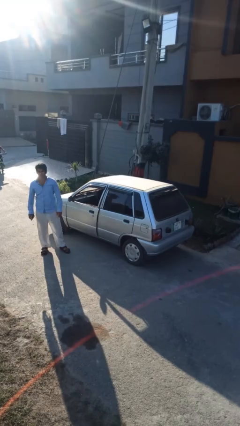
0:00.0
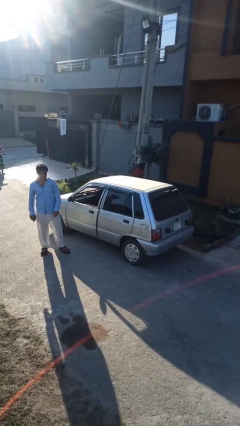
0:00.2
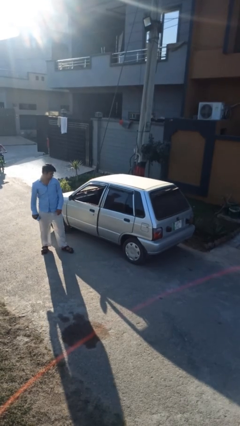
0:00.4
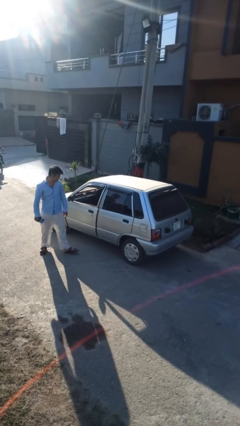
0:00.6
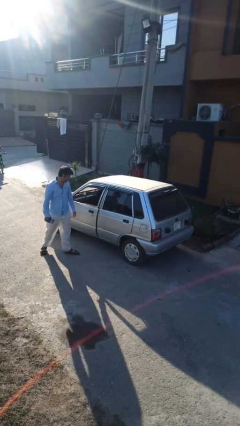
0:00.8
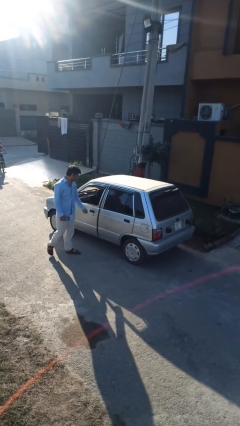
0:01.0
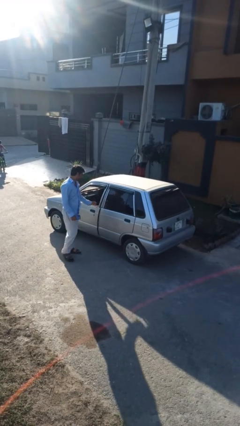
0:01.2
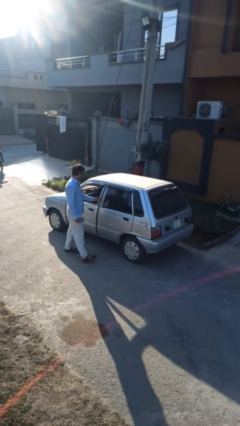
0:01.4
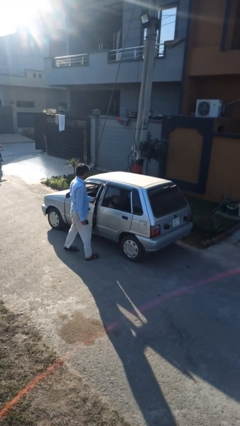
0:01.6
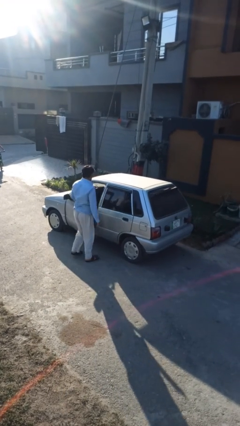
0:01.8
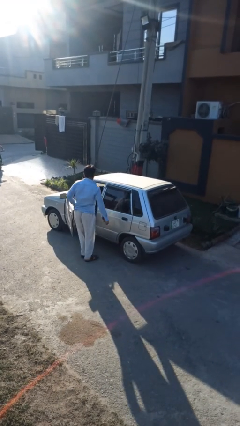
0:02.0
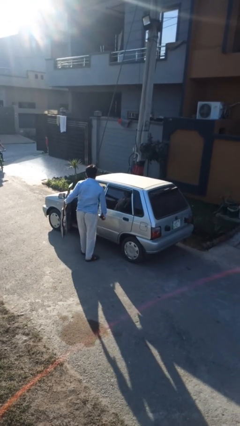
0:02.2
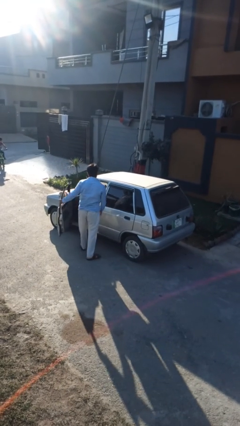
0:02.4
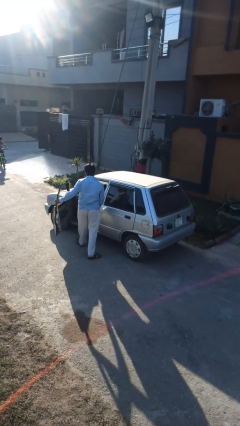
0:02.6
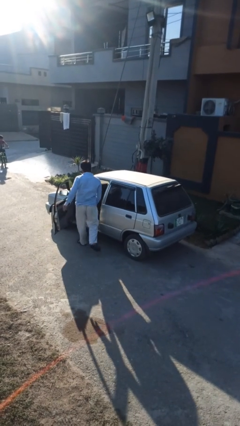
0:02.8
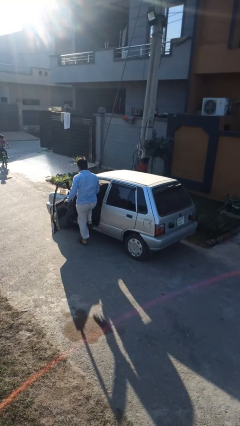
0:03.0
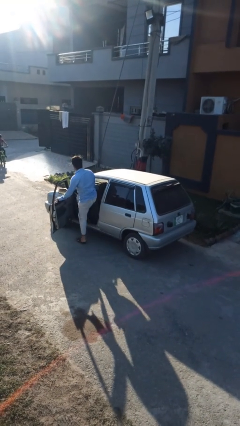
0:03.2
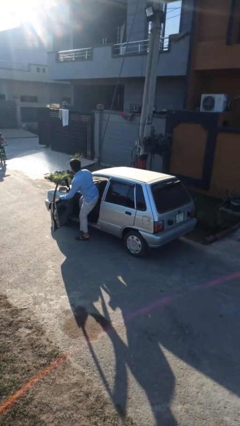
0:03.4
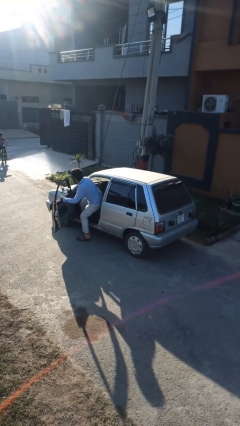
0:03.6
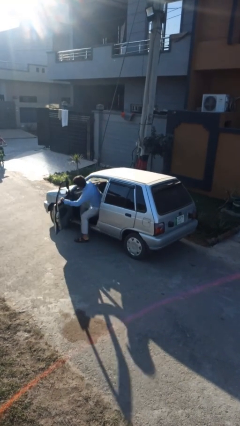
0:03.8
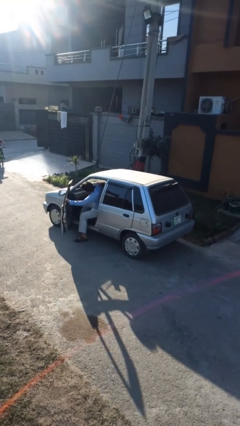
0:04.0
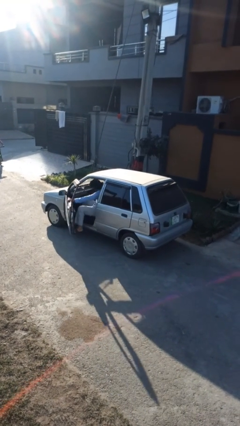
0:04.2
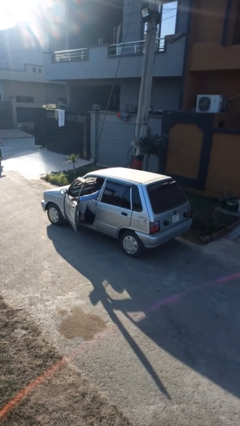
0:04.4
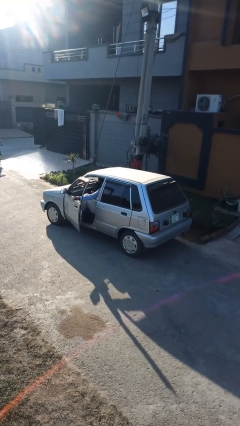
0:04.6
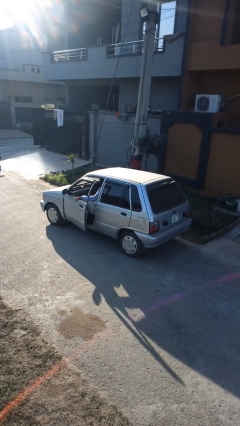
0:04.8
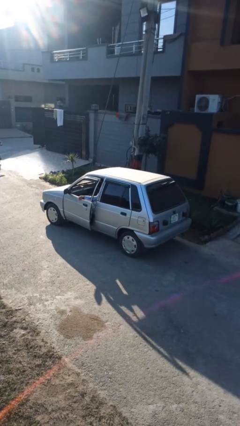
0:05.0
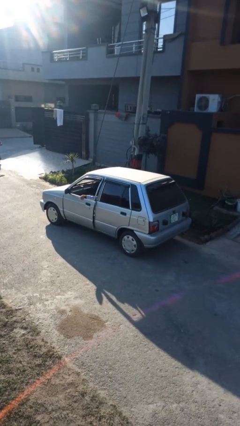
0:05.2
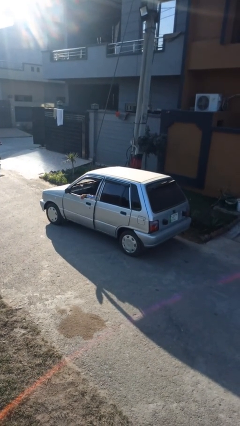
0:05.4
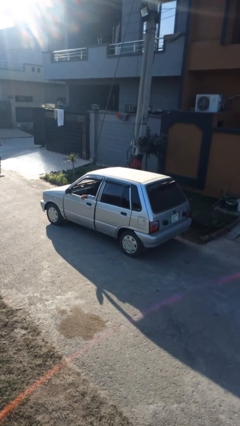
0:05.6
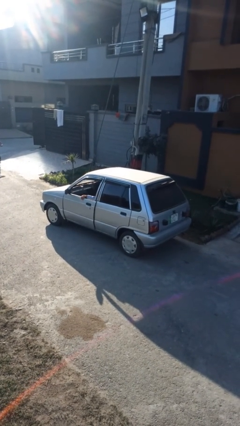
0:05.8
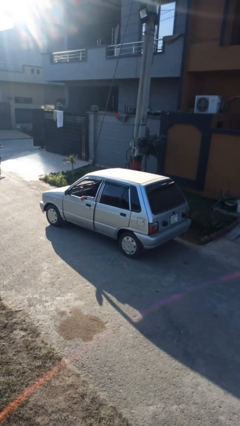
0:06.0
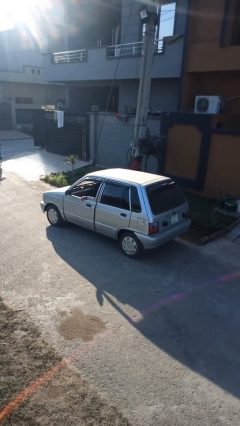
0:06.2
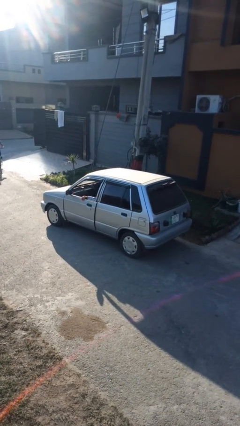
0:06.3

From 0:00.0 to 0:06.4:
car picks up person

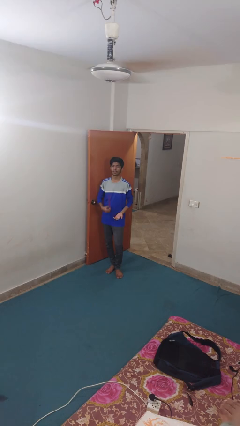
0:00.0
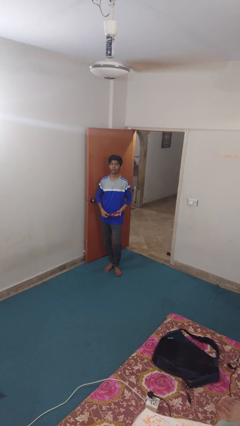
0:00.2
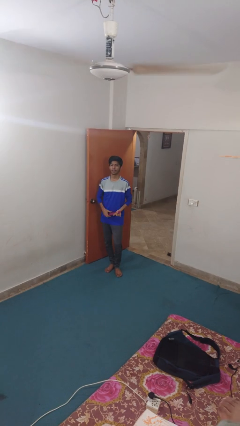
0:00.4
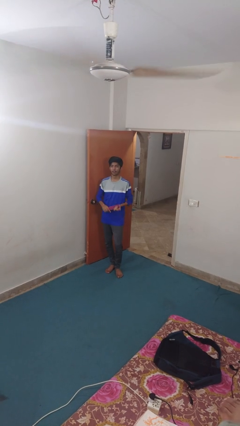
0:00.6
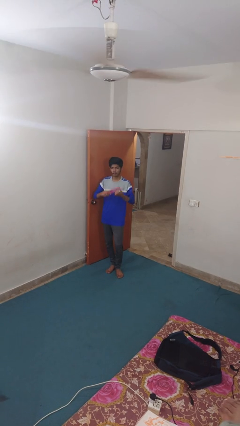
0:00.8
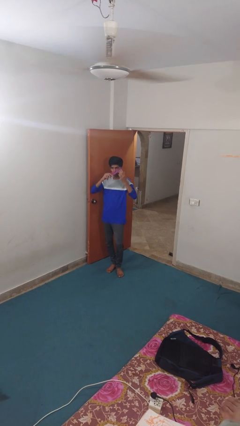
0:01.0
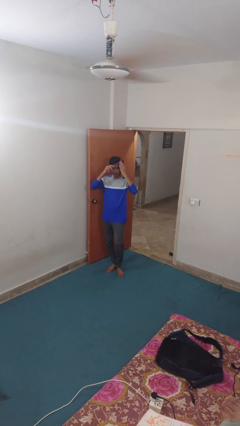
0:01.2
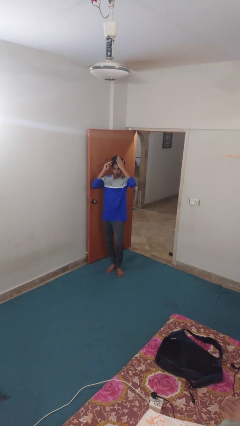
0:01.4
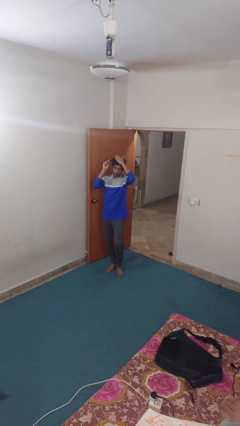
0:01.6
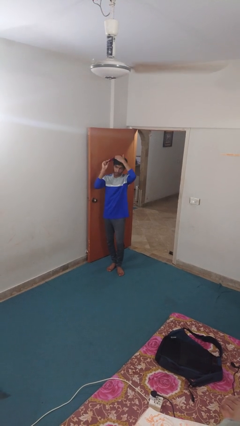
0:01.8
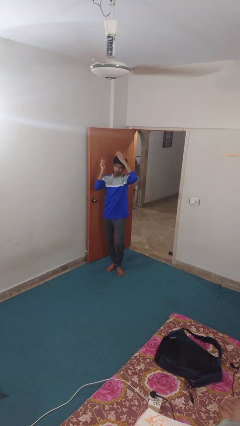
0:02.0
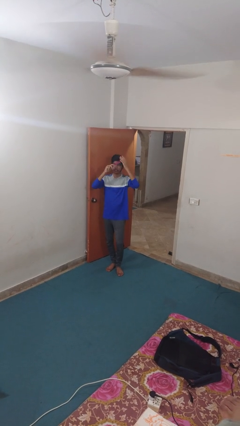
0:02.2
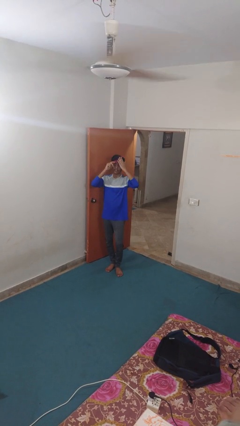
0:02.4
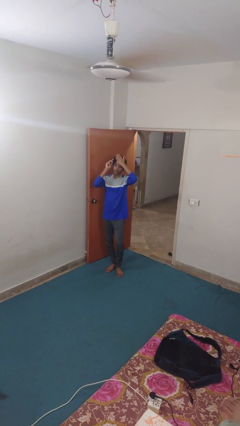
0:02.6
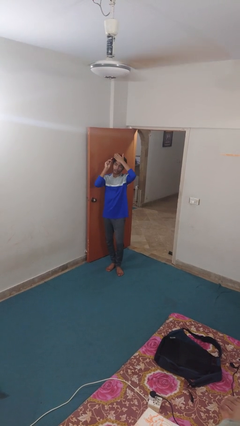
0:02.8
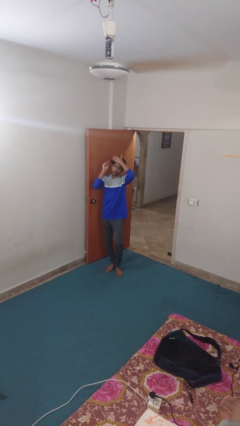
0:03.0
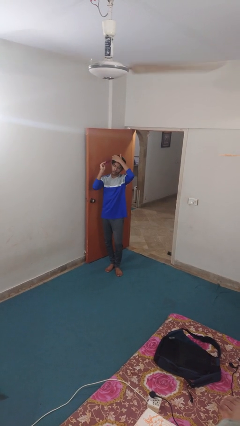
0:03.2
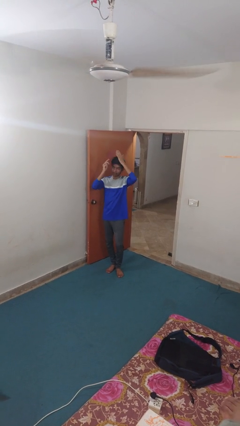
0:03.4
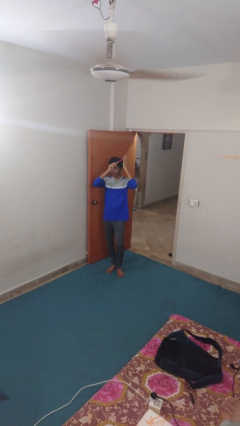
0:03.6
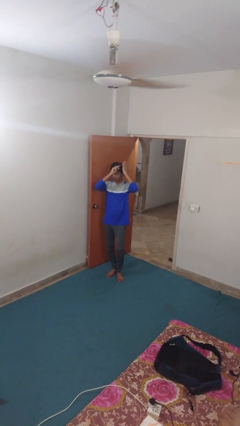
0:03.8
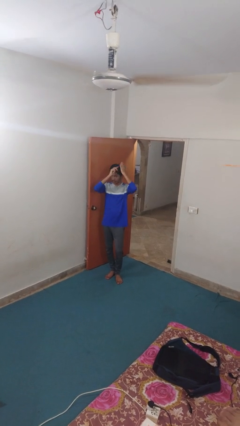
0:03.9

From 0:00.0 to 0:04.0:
person brushes hair

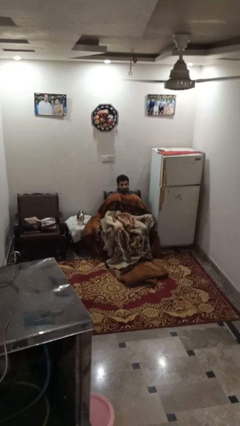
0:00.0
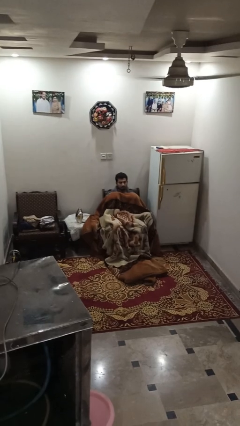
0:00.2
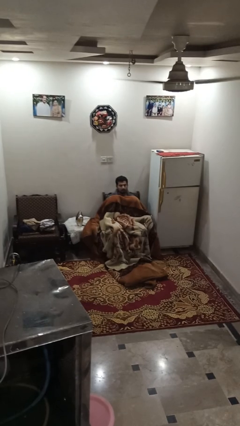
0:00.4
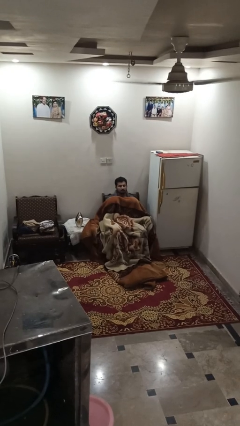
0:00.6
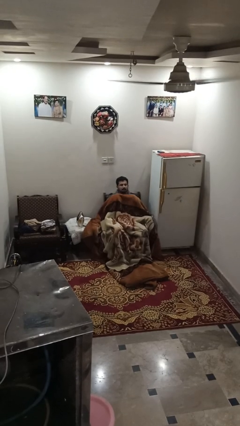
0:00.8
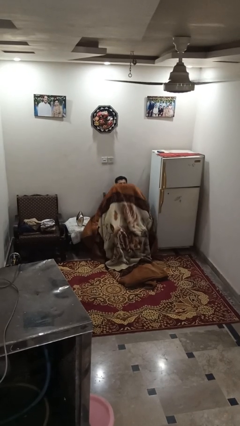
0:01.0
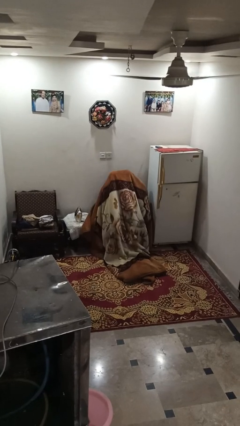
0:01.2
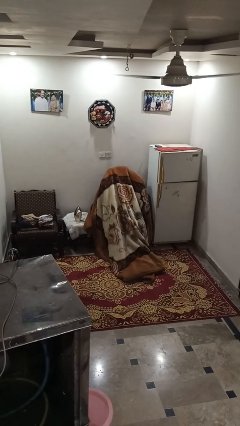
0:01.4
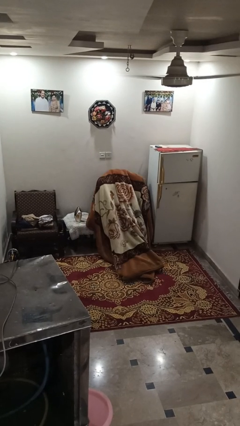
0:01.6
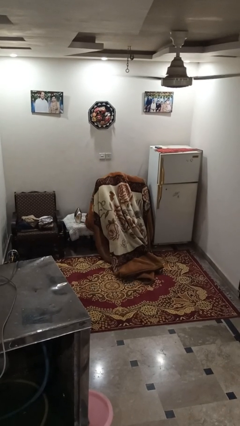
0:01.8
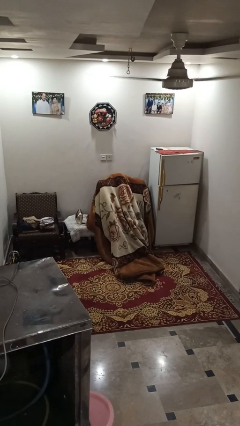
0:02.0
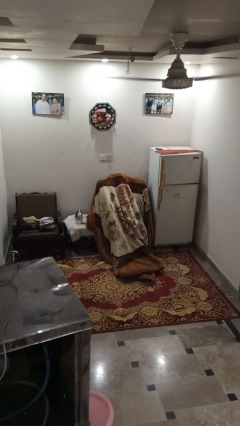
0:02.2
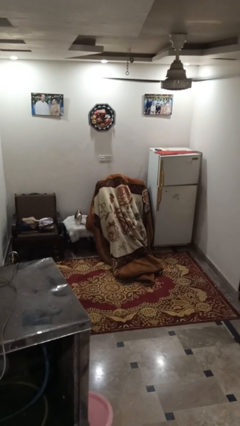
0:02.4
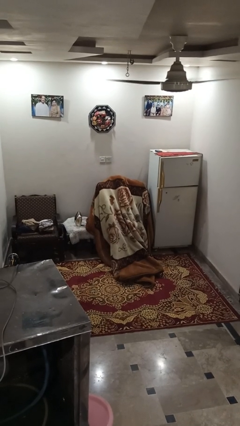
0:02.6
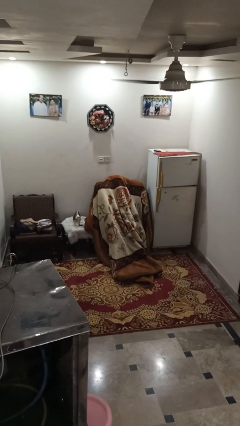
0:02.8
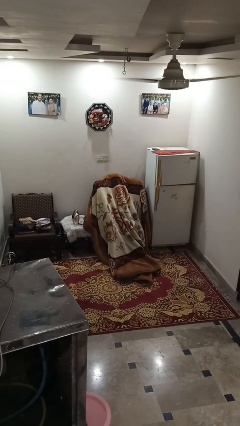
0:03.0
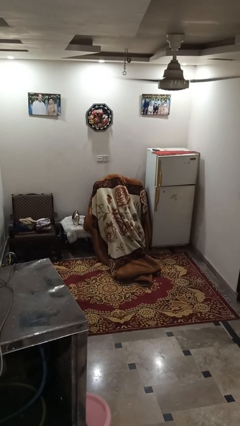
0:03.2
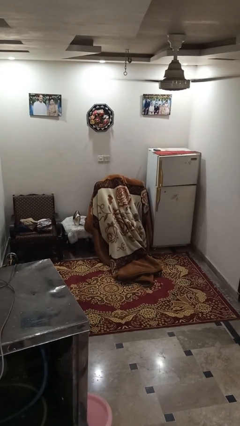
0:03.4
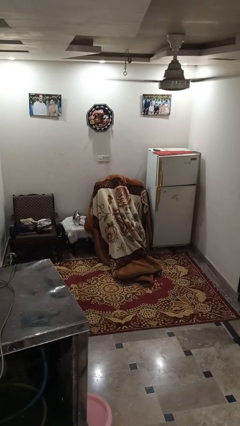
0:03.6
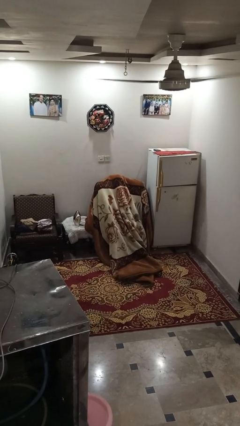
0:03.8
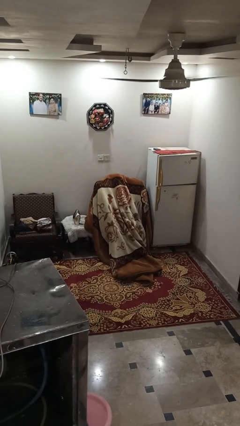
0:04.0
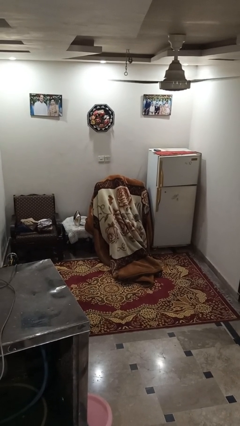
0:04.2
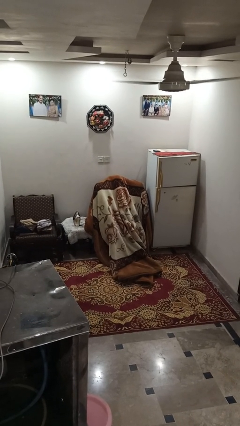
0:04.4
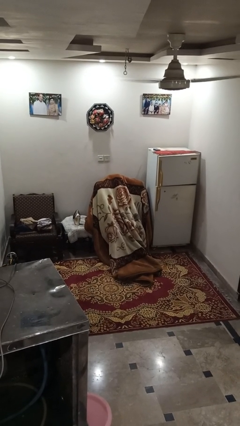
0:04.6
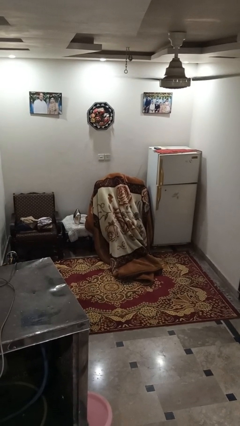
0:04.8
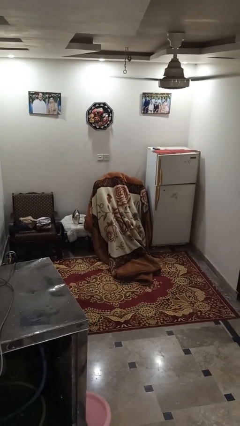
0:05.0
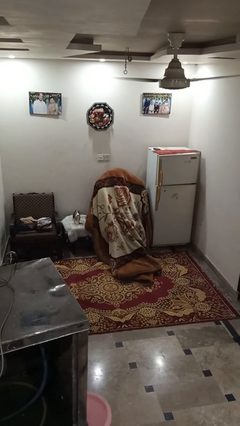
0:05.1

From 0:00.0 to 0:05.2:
person covers with blanket

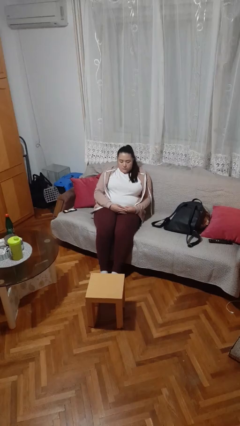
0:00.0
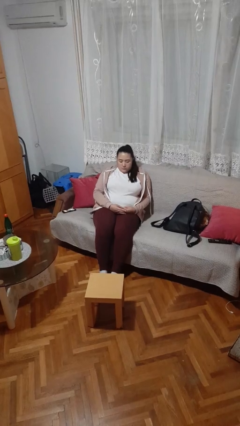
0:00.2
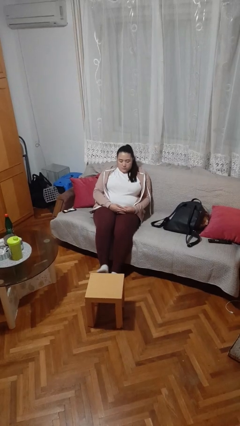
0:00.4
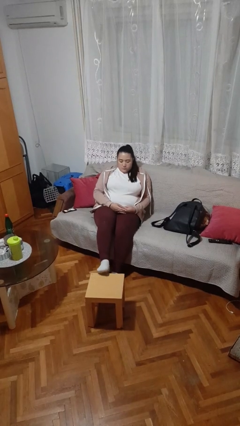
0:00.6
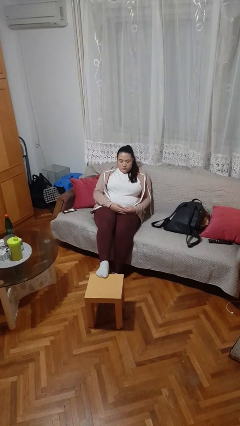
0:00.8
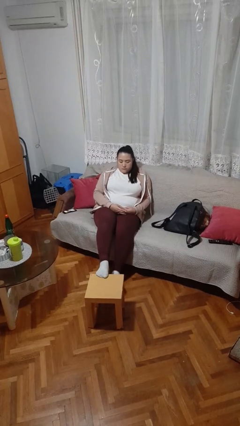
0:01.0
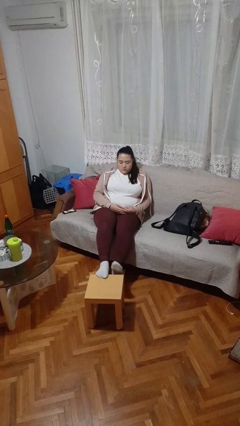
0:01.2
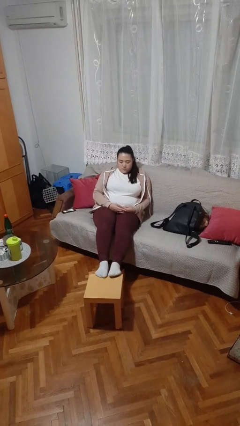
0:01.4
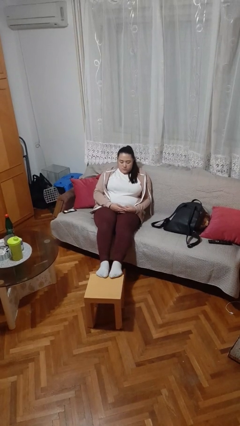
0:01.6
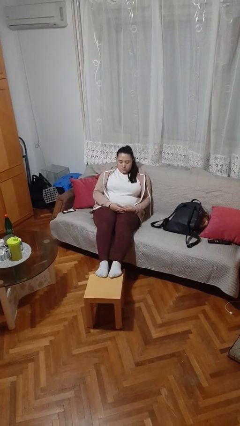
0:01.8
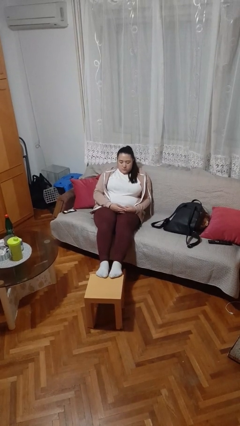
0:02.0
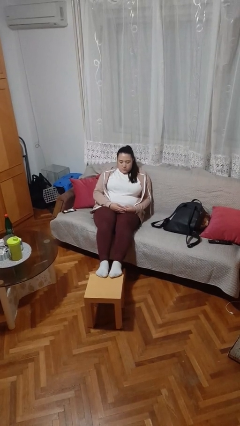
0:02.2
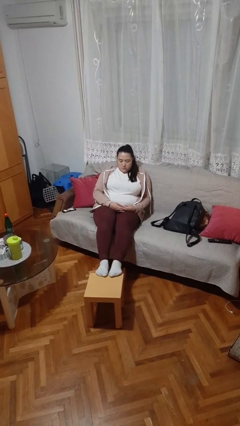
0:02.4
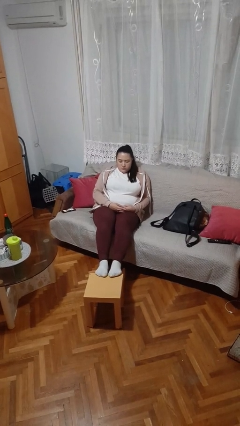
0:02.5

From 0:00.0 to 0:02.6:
person puts feet up
